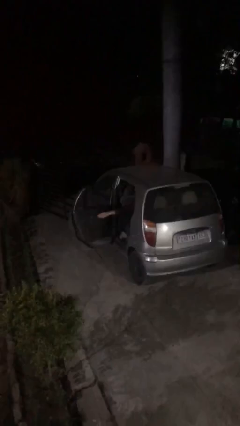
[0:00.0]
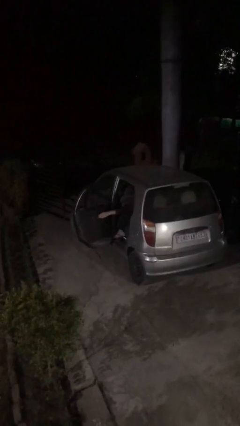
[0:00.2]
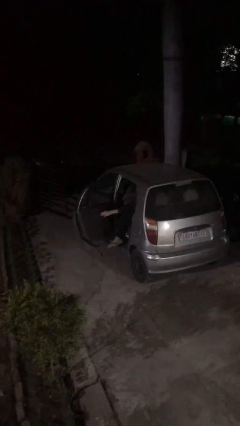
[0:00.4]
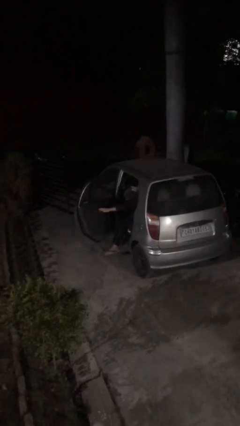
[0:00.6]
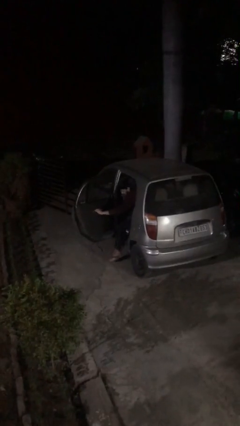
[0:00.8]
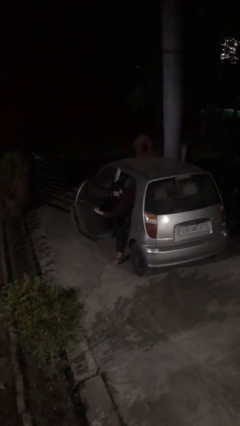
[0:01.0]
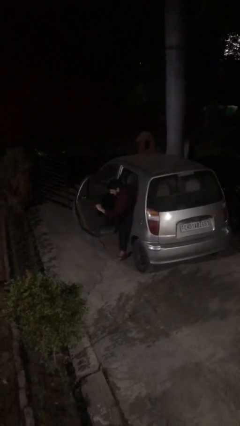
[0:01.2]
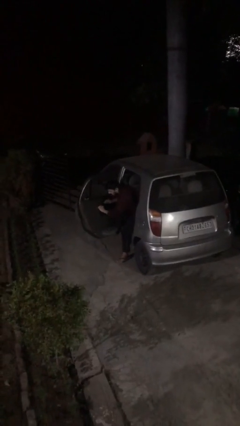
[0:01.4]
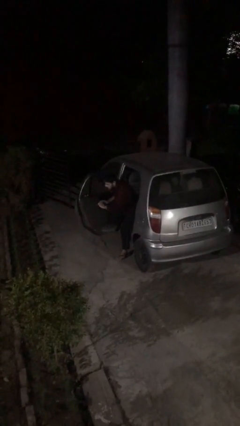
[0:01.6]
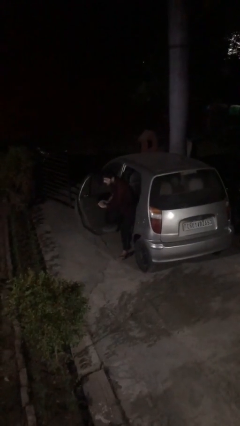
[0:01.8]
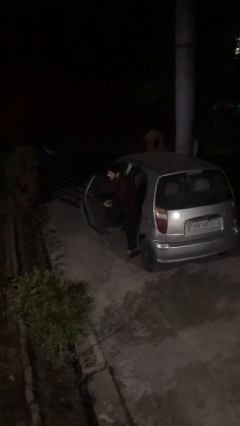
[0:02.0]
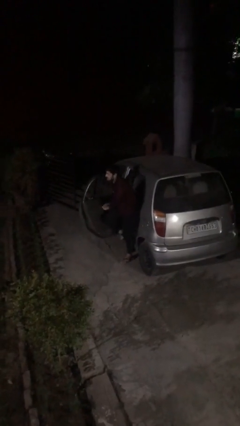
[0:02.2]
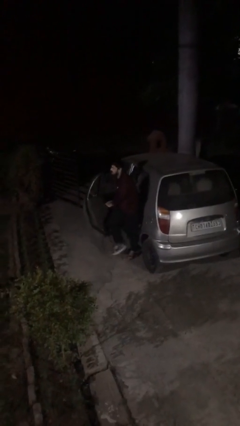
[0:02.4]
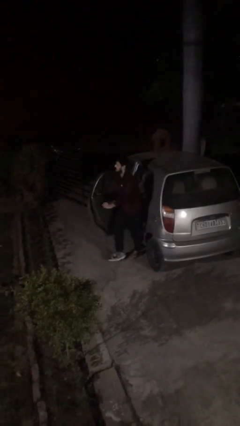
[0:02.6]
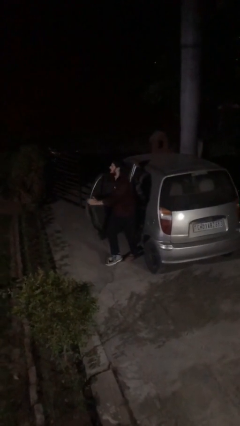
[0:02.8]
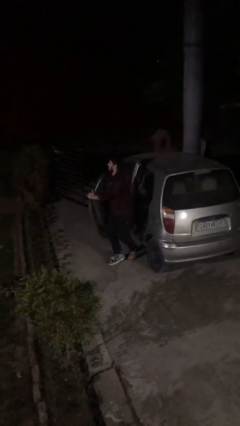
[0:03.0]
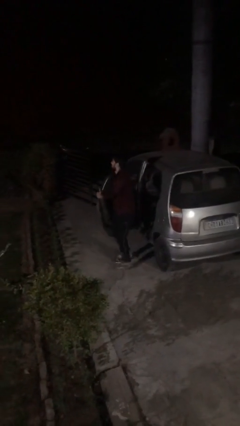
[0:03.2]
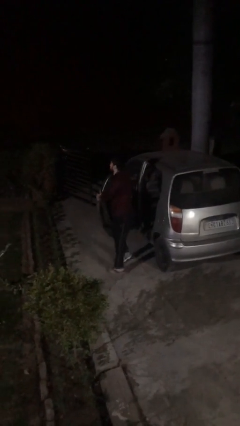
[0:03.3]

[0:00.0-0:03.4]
person exits car

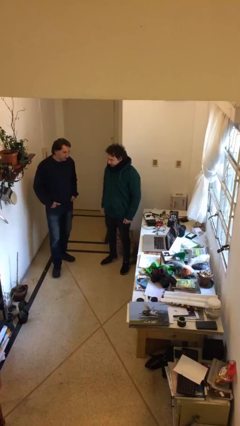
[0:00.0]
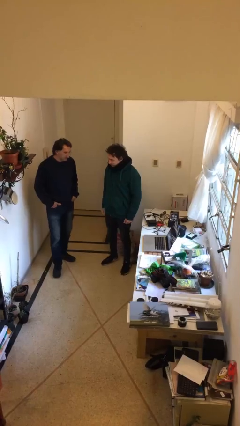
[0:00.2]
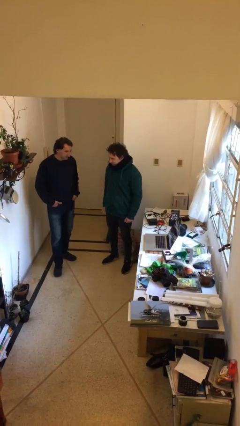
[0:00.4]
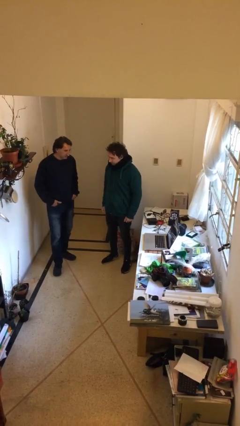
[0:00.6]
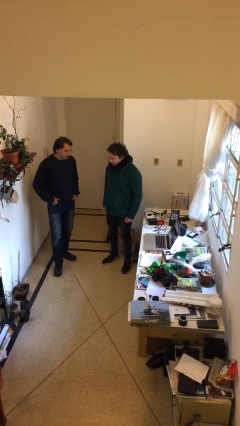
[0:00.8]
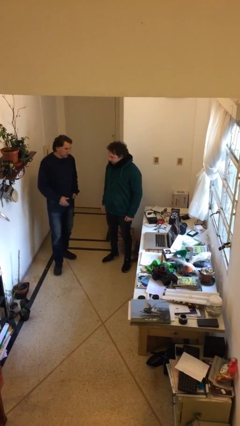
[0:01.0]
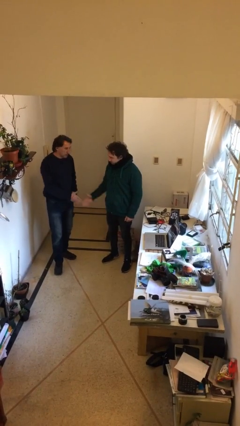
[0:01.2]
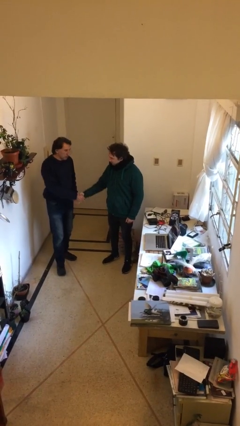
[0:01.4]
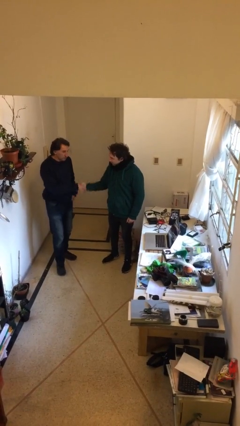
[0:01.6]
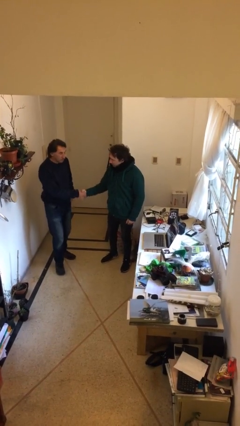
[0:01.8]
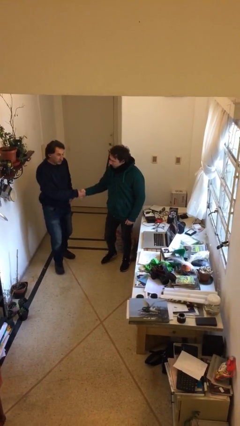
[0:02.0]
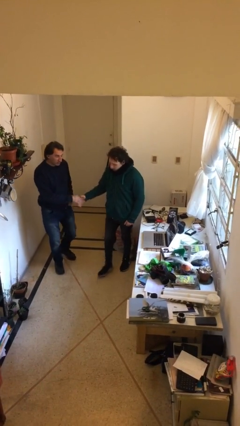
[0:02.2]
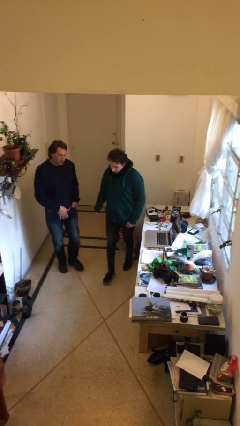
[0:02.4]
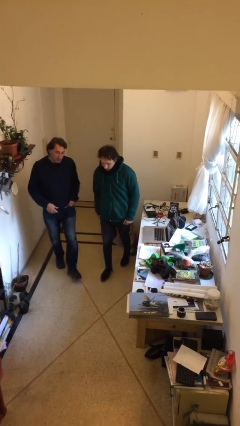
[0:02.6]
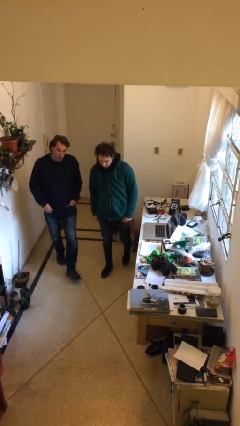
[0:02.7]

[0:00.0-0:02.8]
person shakes hand

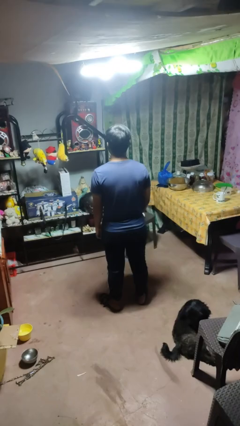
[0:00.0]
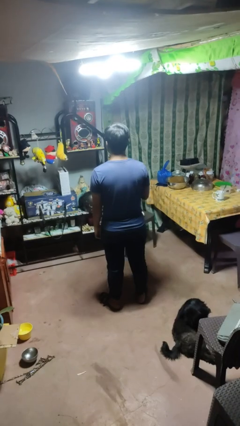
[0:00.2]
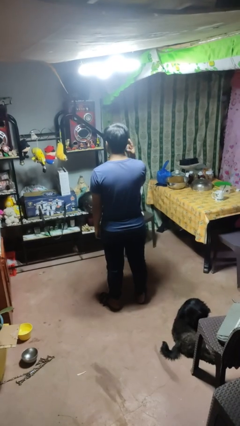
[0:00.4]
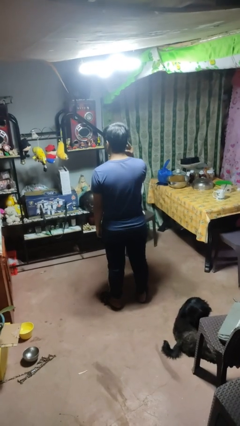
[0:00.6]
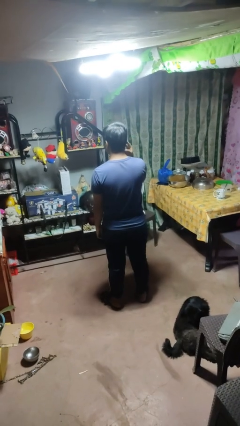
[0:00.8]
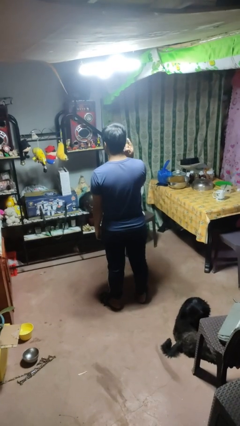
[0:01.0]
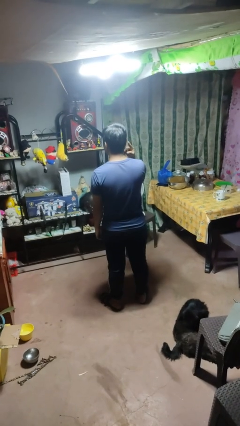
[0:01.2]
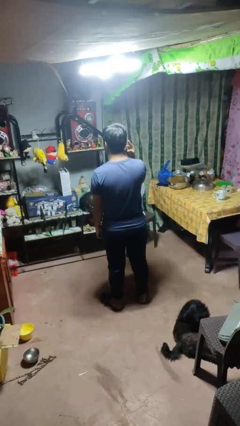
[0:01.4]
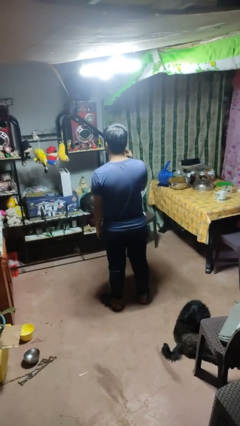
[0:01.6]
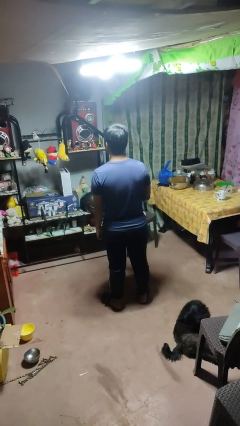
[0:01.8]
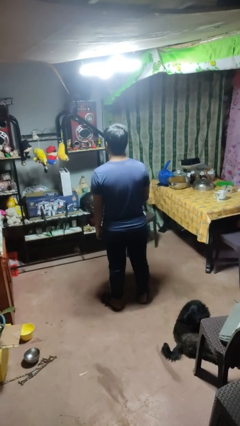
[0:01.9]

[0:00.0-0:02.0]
person gestures listen closely

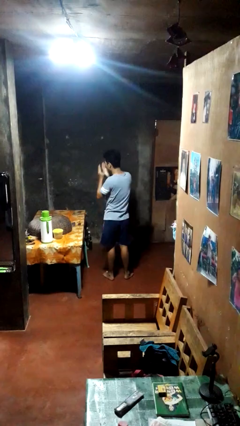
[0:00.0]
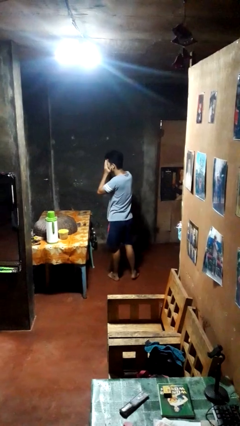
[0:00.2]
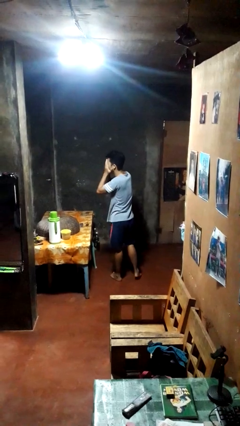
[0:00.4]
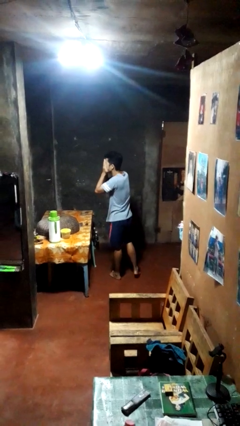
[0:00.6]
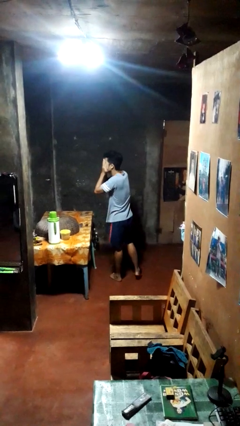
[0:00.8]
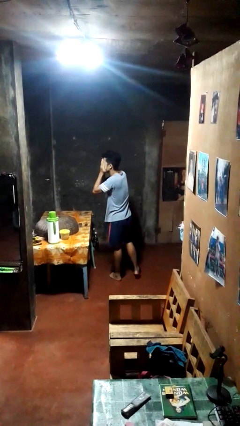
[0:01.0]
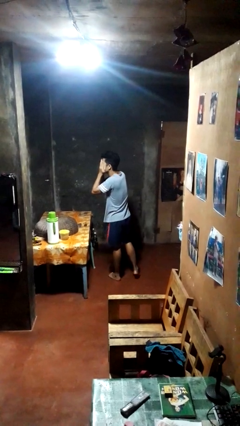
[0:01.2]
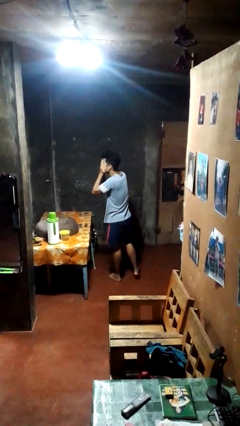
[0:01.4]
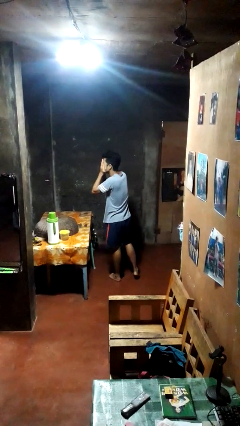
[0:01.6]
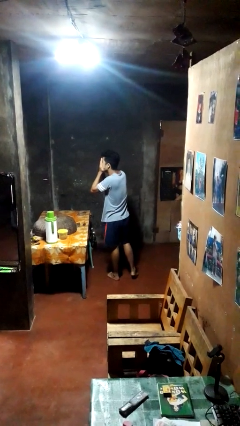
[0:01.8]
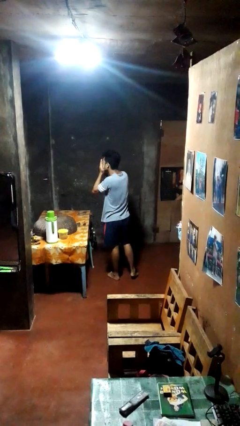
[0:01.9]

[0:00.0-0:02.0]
person covers face with hands

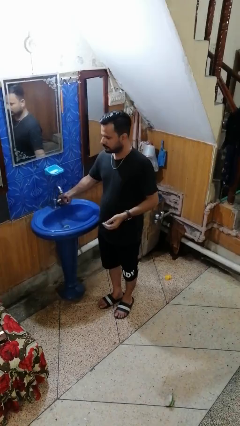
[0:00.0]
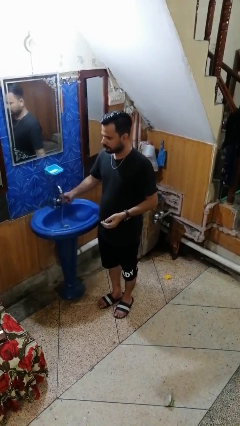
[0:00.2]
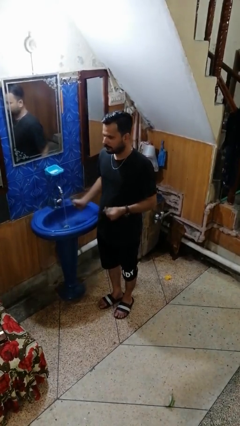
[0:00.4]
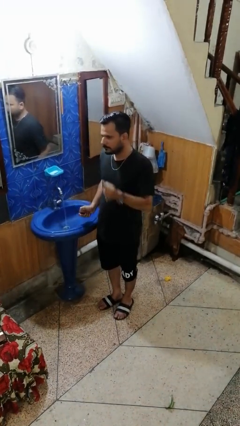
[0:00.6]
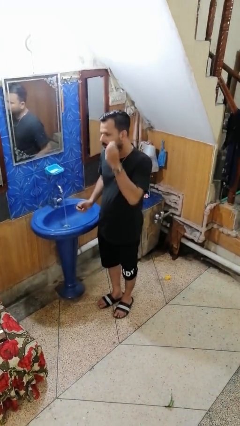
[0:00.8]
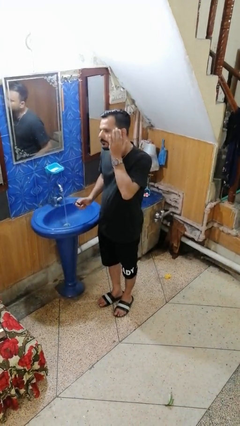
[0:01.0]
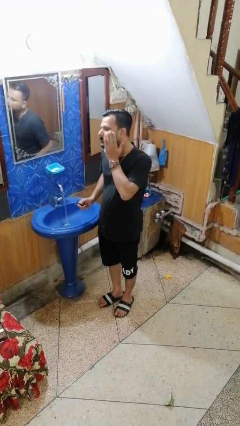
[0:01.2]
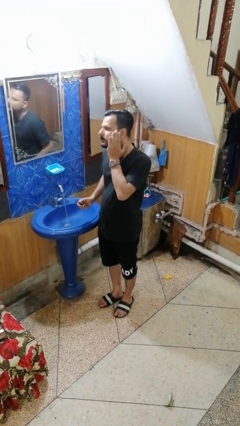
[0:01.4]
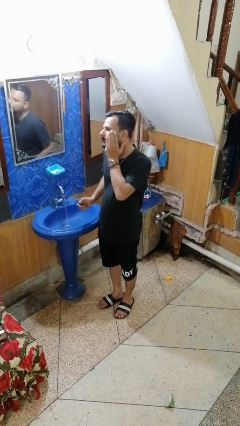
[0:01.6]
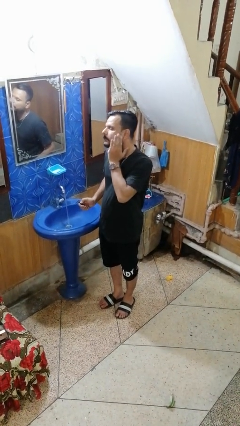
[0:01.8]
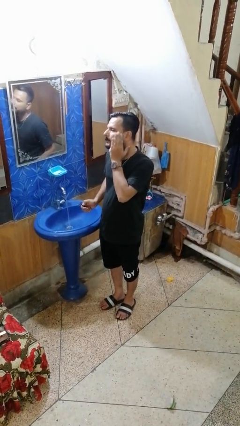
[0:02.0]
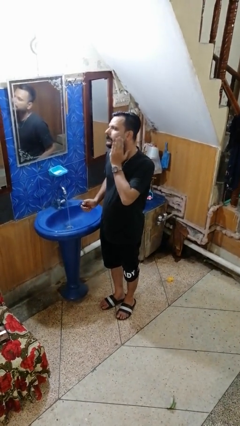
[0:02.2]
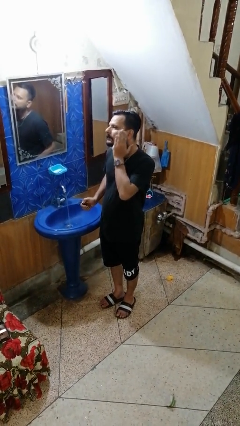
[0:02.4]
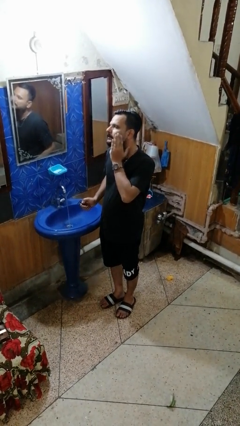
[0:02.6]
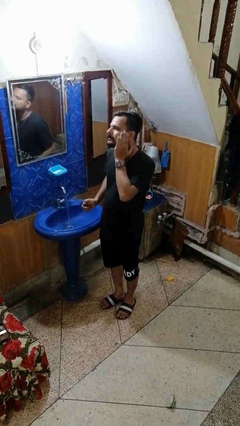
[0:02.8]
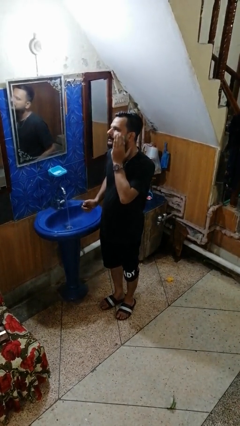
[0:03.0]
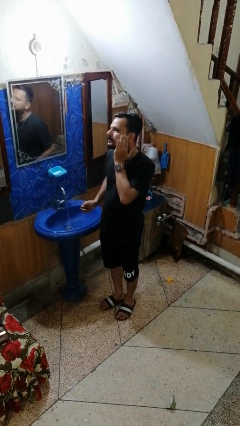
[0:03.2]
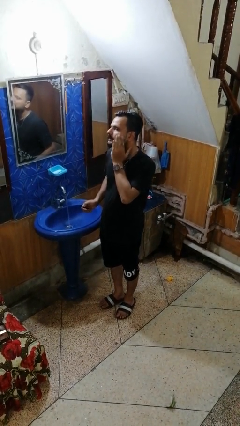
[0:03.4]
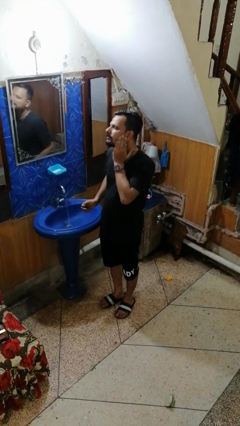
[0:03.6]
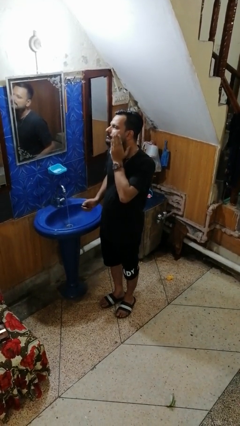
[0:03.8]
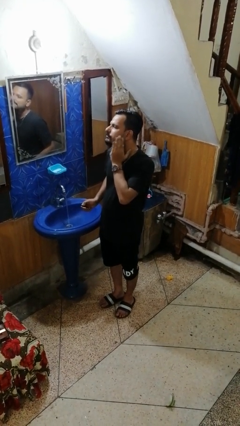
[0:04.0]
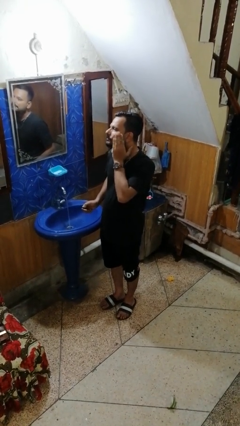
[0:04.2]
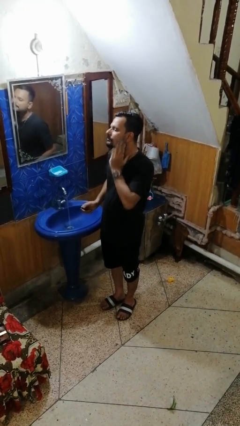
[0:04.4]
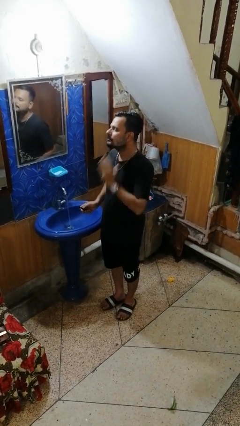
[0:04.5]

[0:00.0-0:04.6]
person applies shaving cream

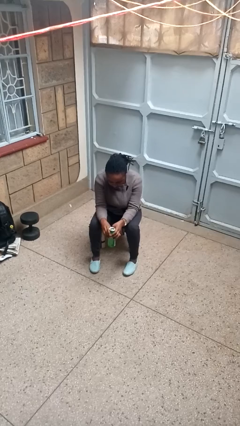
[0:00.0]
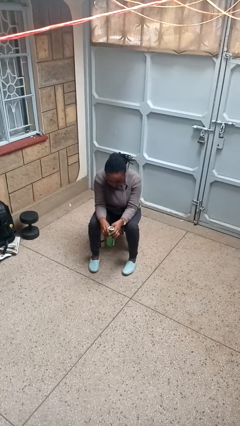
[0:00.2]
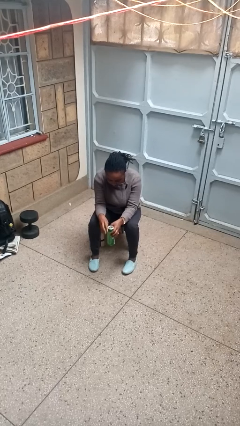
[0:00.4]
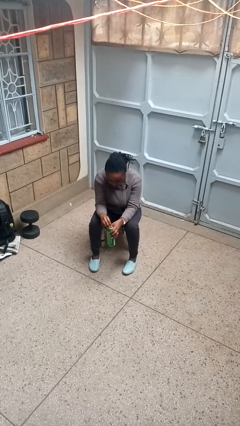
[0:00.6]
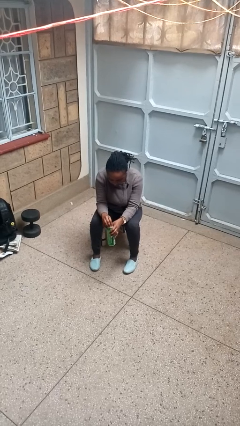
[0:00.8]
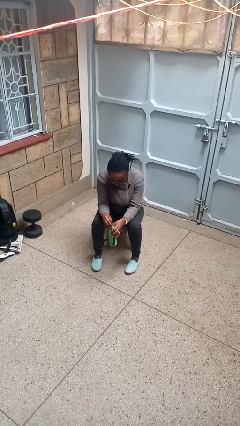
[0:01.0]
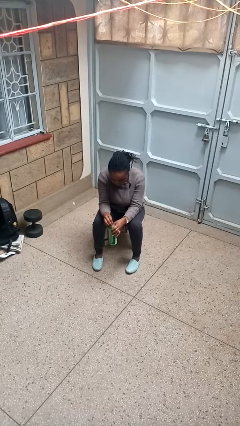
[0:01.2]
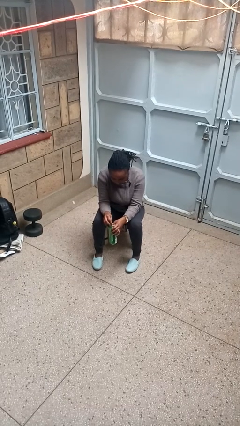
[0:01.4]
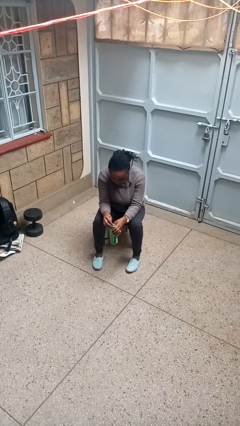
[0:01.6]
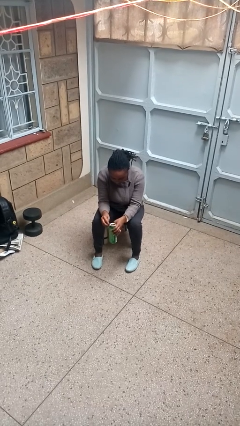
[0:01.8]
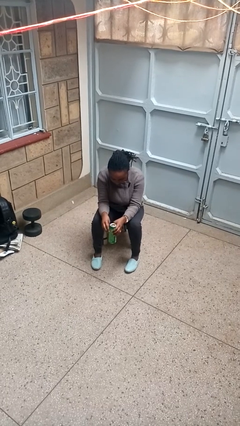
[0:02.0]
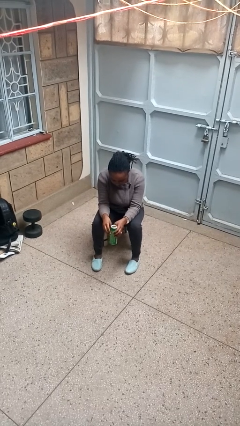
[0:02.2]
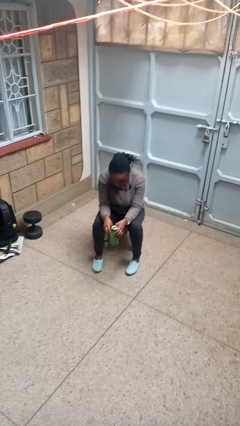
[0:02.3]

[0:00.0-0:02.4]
person opens beverage can
